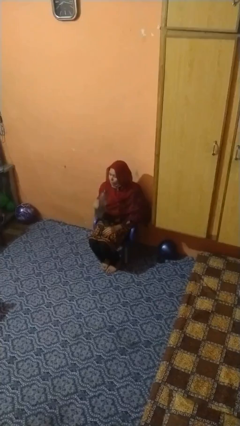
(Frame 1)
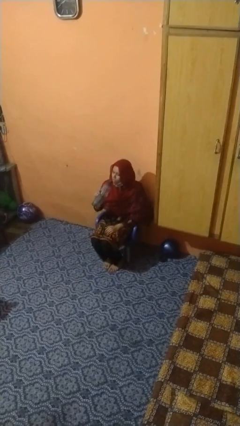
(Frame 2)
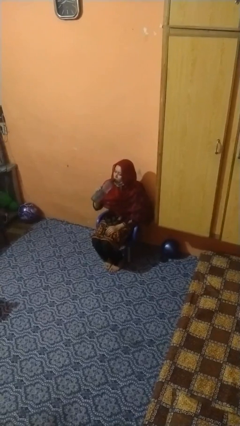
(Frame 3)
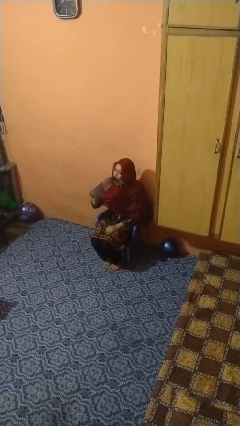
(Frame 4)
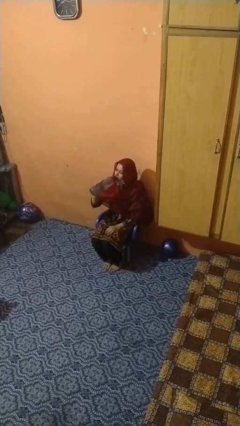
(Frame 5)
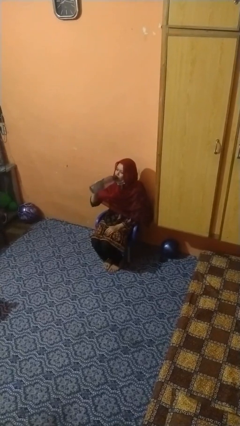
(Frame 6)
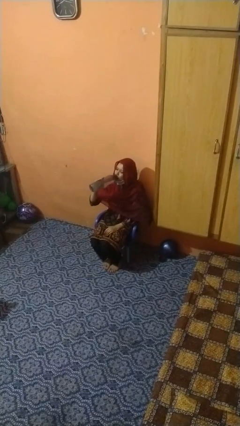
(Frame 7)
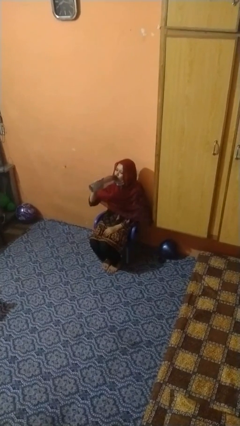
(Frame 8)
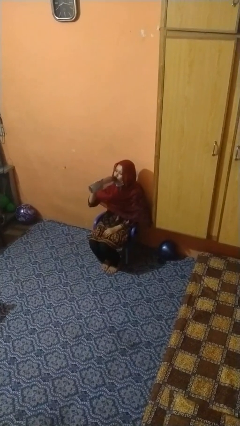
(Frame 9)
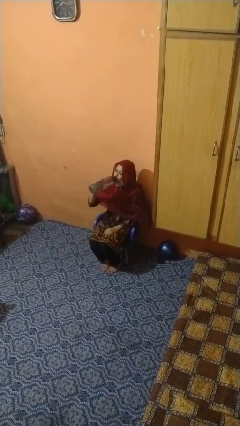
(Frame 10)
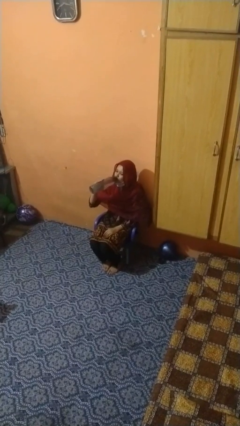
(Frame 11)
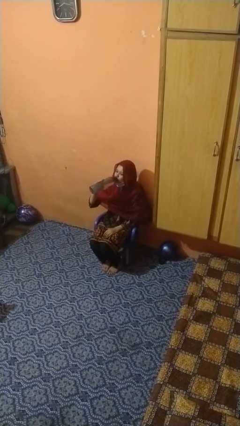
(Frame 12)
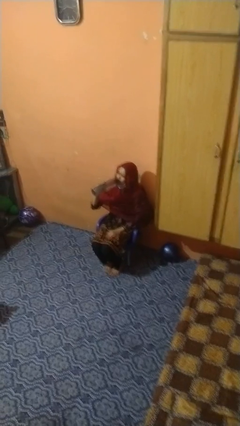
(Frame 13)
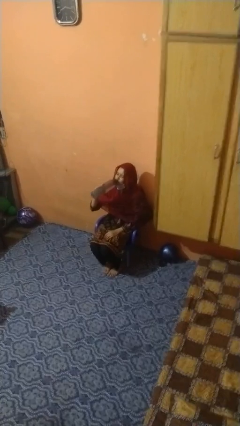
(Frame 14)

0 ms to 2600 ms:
person drinks from bottle

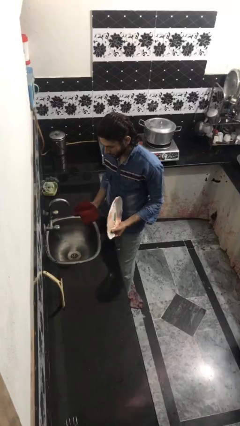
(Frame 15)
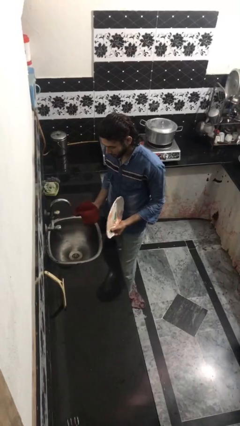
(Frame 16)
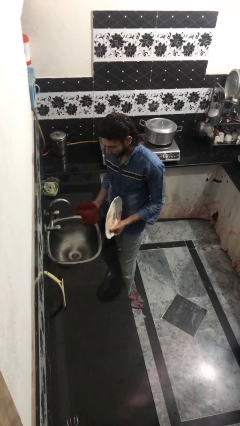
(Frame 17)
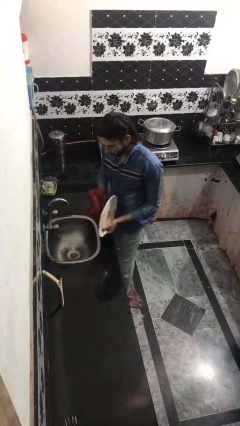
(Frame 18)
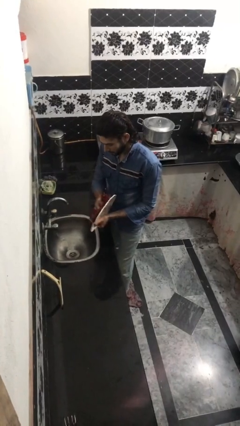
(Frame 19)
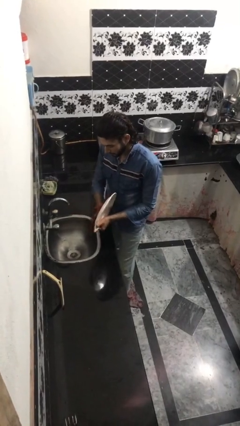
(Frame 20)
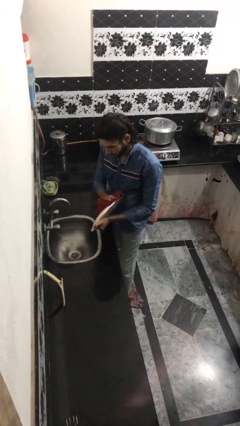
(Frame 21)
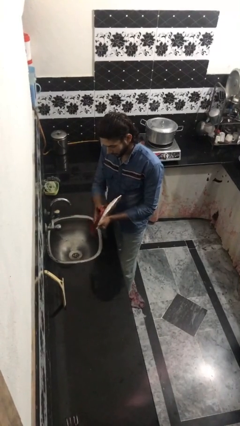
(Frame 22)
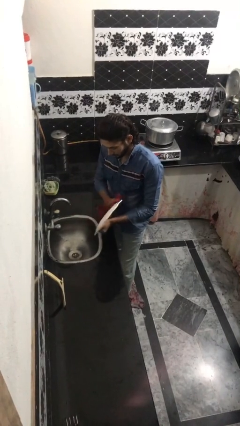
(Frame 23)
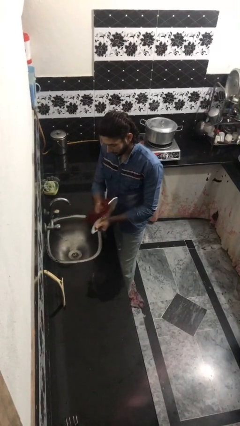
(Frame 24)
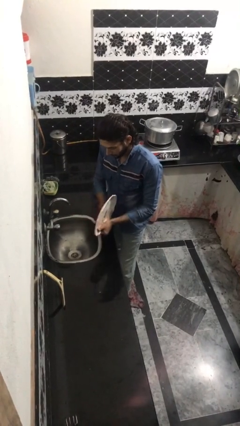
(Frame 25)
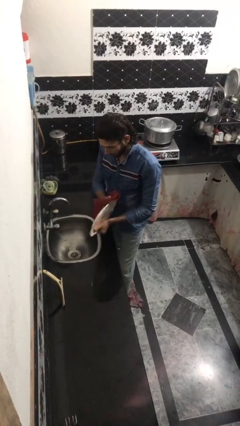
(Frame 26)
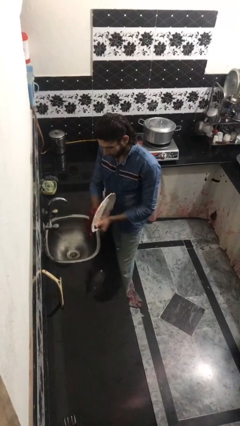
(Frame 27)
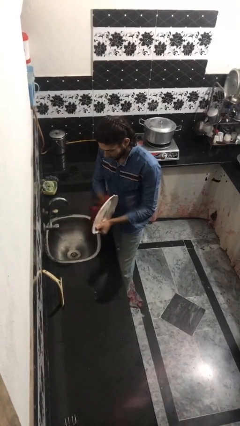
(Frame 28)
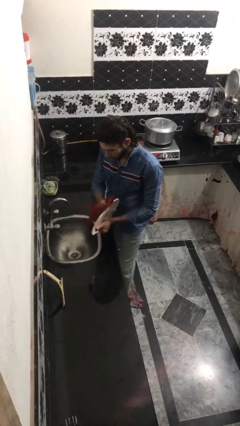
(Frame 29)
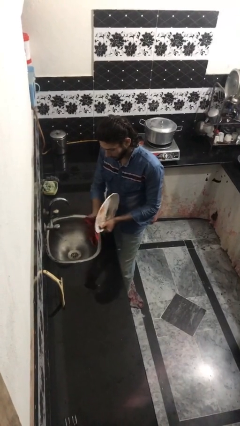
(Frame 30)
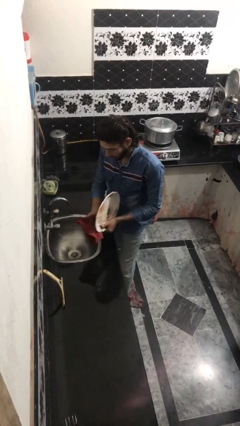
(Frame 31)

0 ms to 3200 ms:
person dries dish

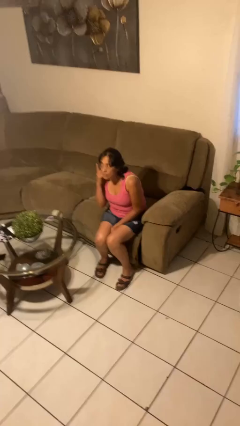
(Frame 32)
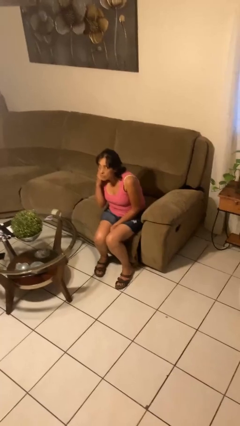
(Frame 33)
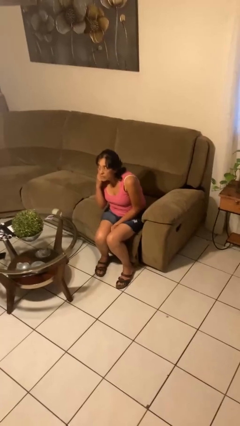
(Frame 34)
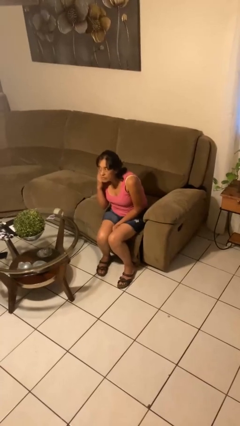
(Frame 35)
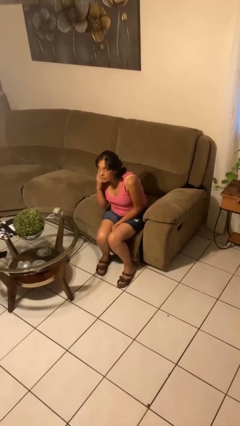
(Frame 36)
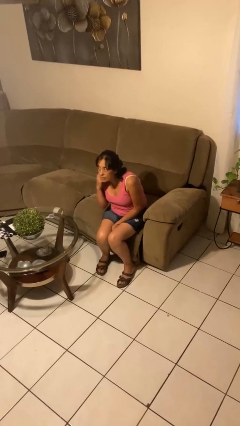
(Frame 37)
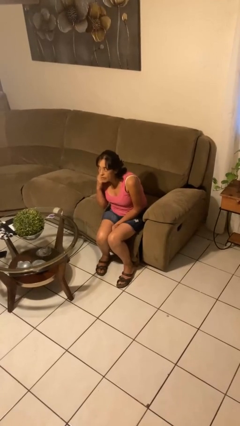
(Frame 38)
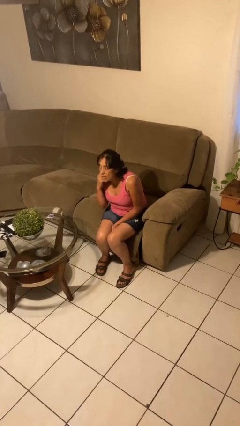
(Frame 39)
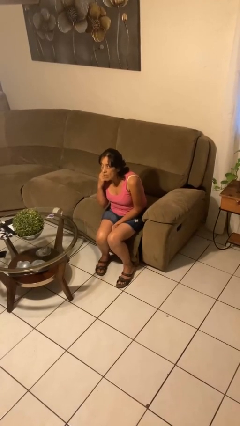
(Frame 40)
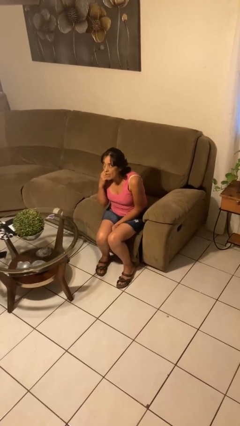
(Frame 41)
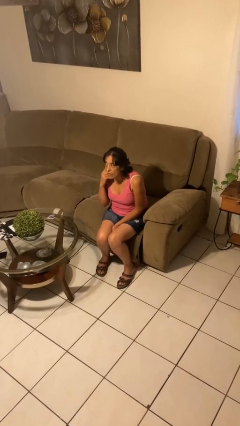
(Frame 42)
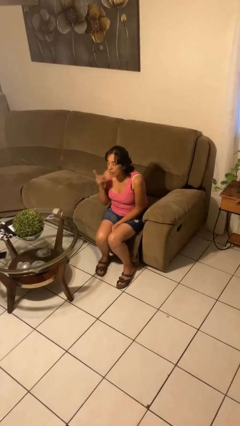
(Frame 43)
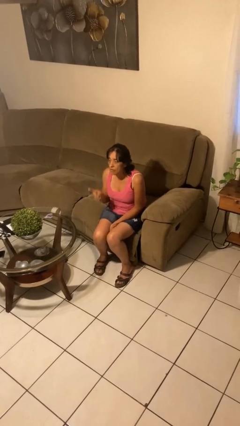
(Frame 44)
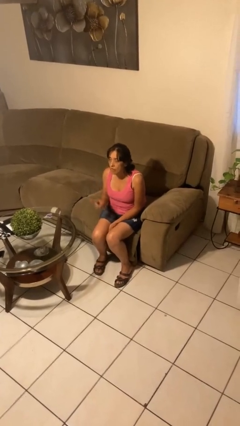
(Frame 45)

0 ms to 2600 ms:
person gestures listen closely

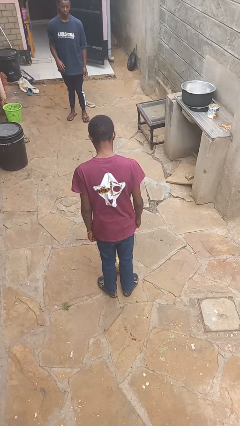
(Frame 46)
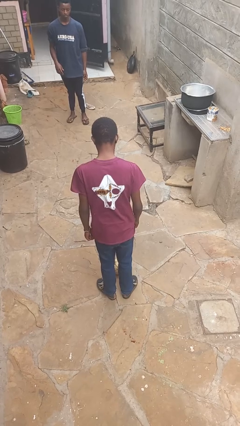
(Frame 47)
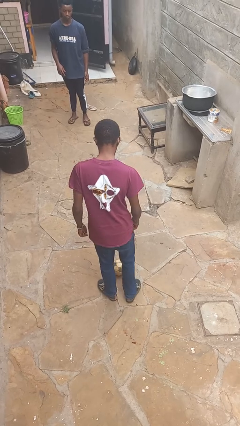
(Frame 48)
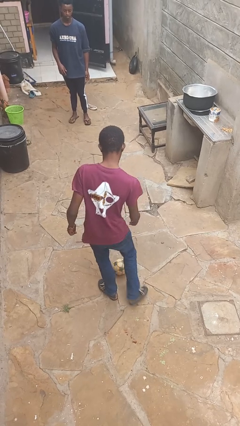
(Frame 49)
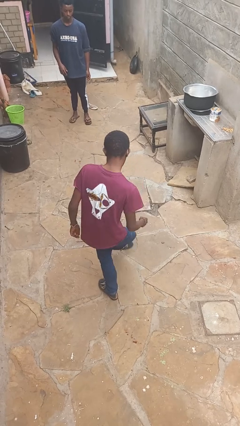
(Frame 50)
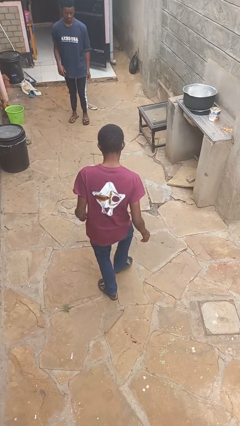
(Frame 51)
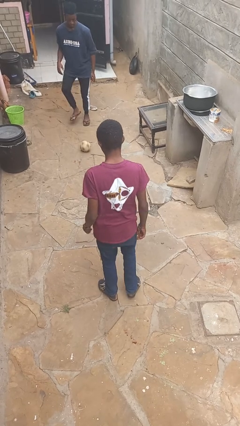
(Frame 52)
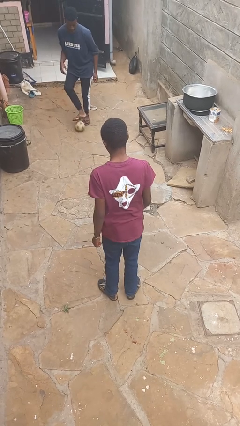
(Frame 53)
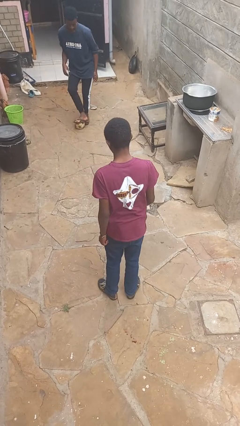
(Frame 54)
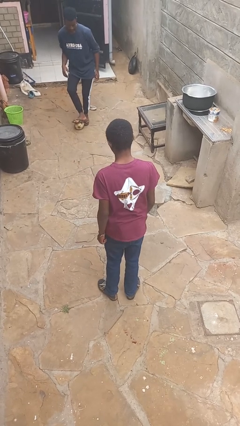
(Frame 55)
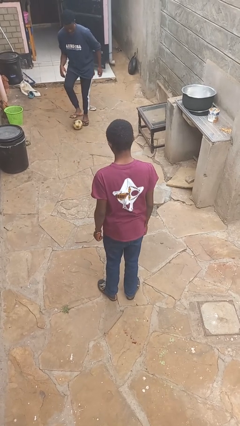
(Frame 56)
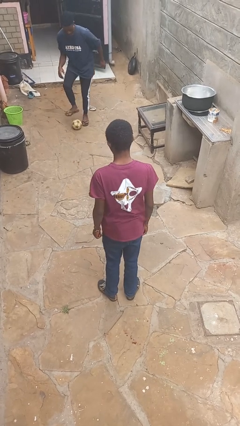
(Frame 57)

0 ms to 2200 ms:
person kicks object to person

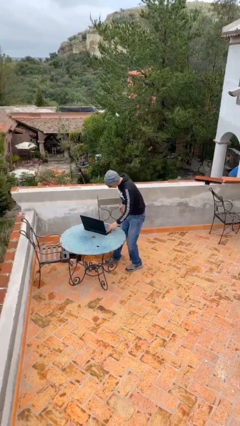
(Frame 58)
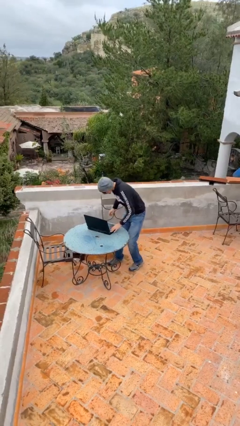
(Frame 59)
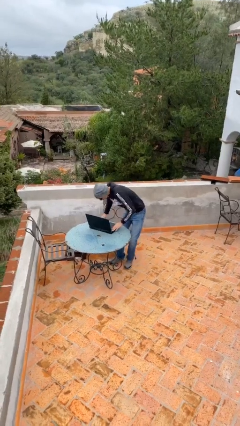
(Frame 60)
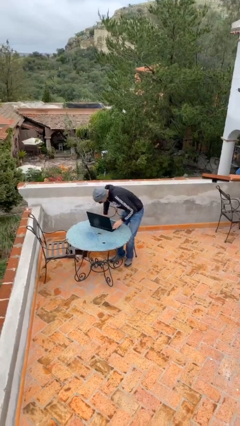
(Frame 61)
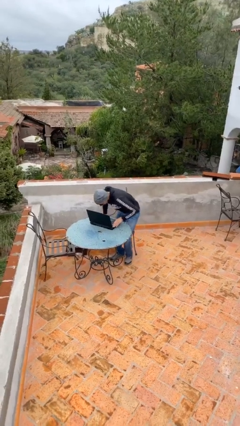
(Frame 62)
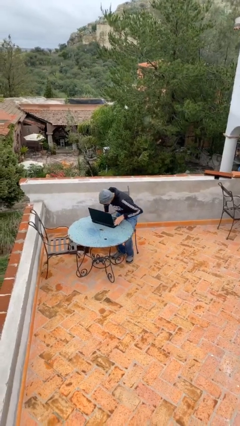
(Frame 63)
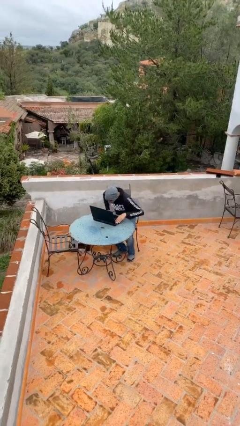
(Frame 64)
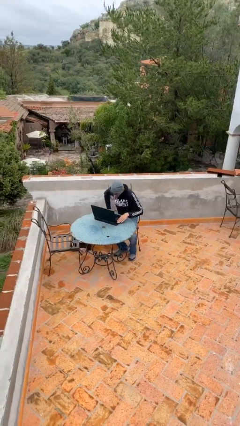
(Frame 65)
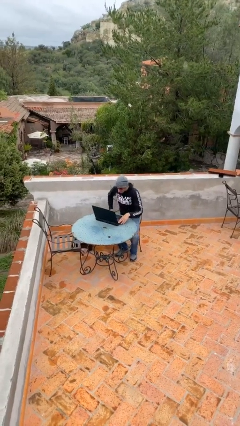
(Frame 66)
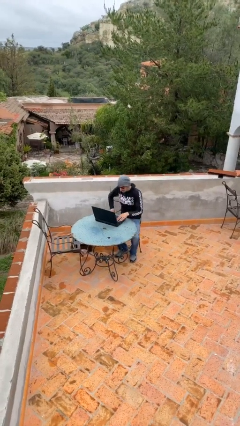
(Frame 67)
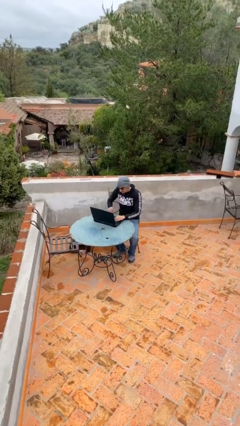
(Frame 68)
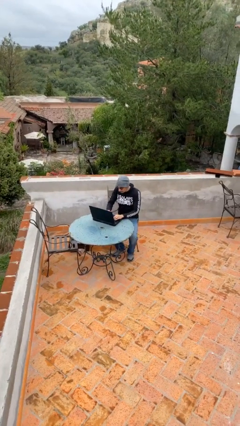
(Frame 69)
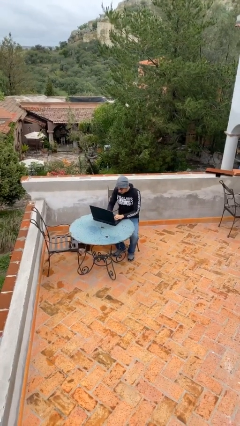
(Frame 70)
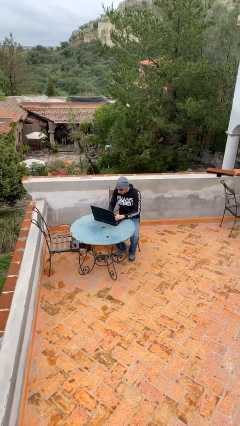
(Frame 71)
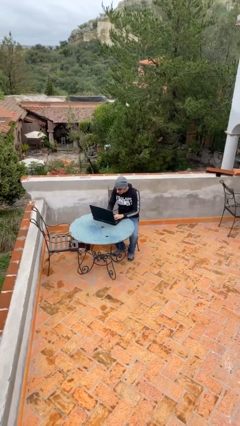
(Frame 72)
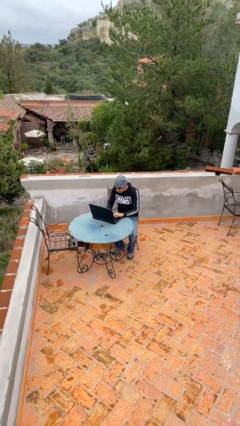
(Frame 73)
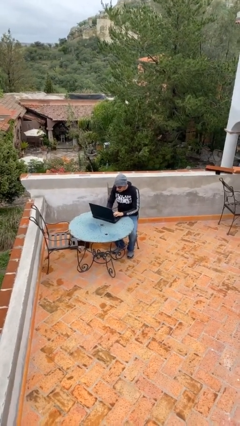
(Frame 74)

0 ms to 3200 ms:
person sits down

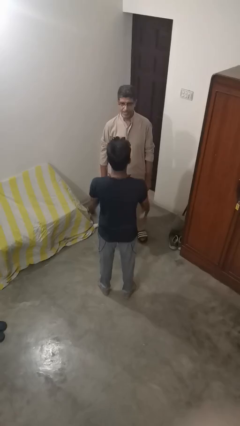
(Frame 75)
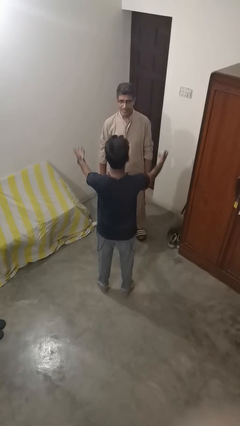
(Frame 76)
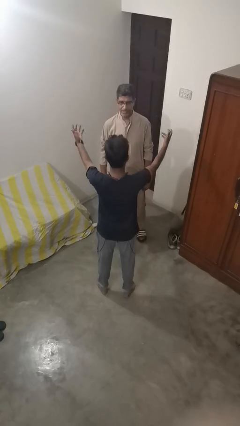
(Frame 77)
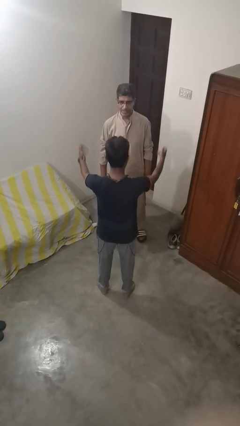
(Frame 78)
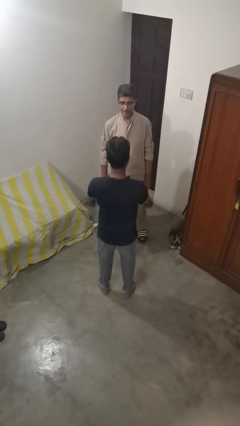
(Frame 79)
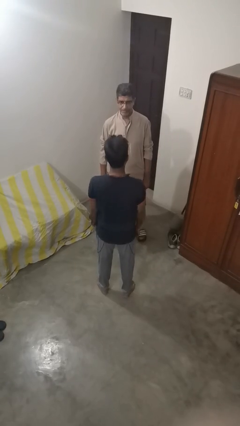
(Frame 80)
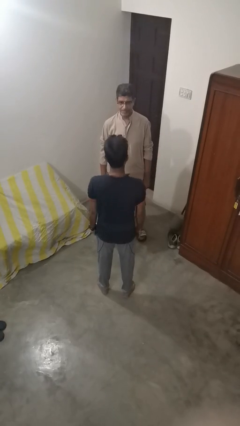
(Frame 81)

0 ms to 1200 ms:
person laughs with person

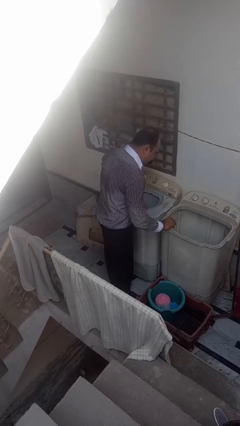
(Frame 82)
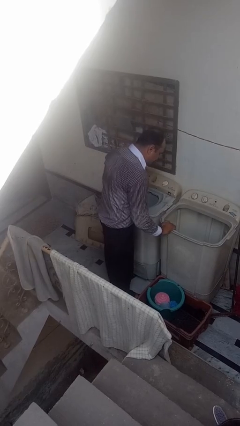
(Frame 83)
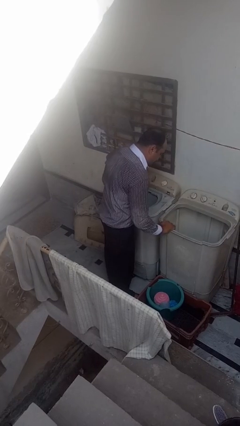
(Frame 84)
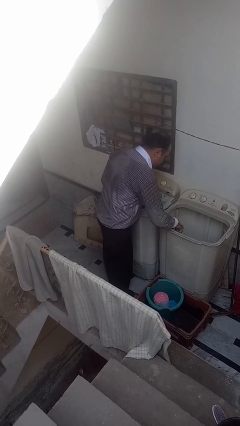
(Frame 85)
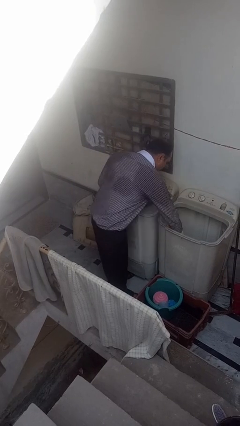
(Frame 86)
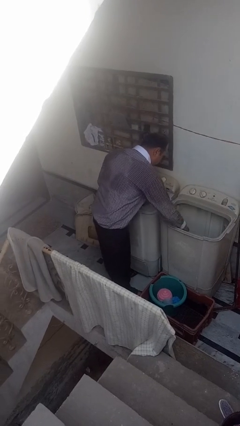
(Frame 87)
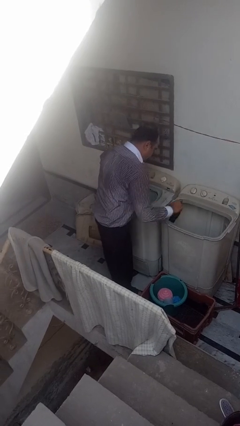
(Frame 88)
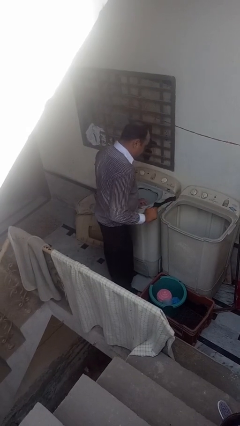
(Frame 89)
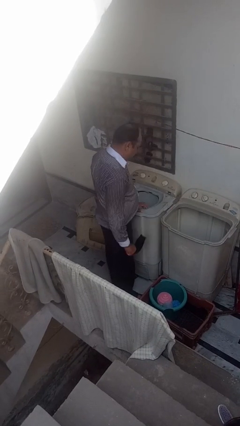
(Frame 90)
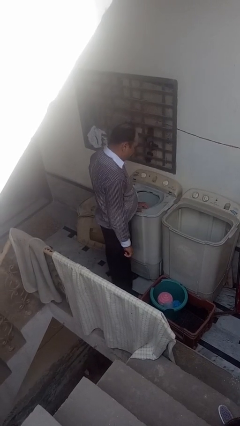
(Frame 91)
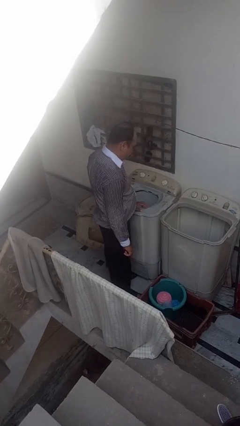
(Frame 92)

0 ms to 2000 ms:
person unloads clotheswasher
